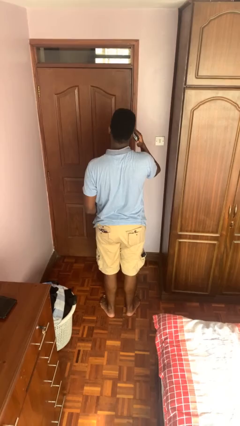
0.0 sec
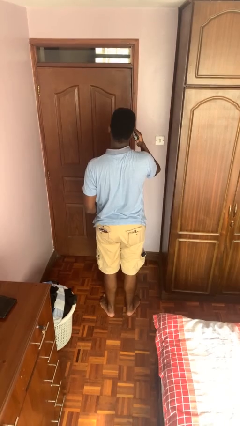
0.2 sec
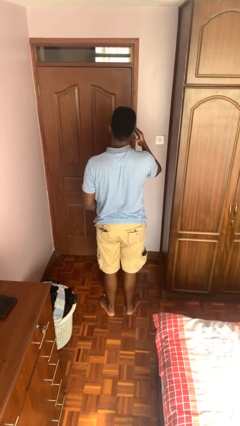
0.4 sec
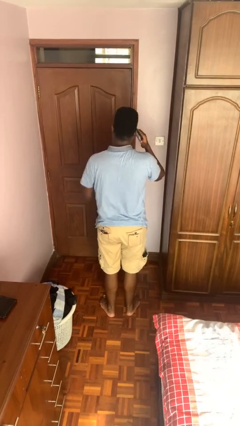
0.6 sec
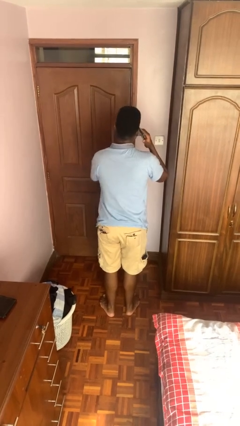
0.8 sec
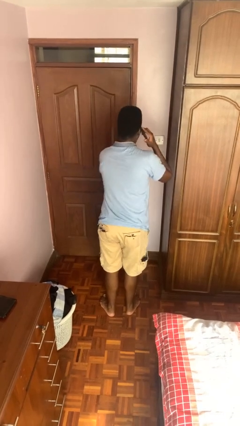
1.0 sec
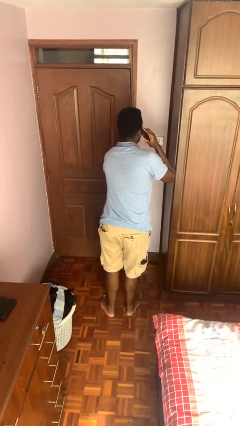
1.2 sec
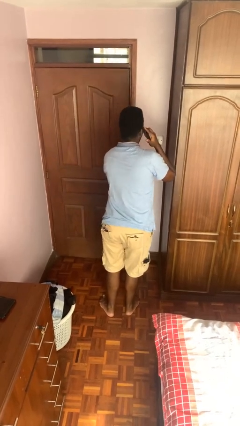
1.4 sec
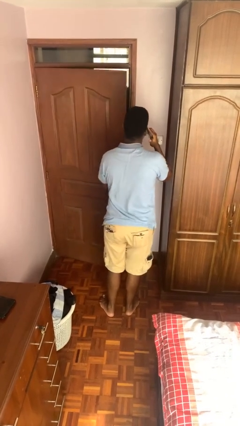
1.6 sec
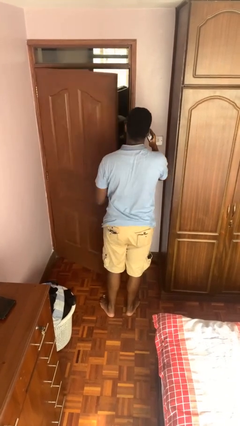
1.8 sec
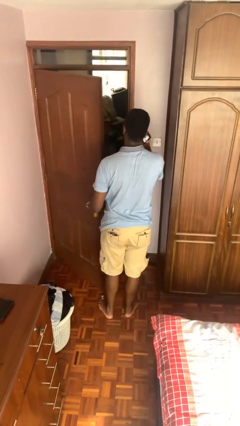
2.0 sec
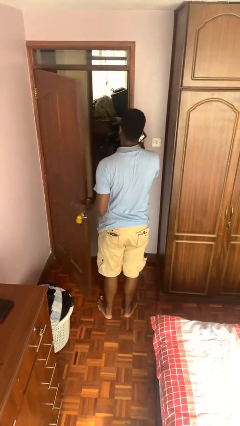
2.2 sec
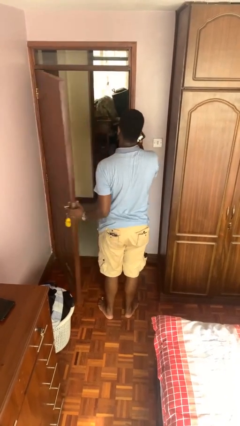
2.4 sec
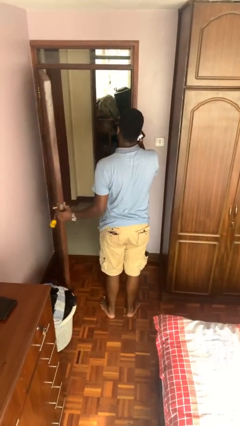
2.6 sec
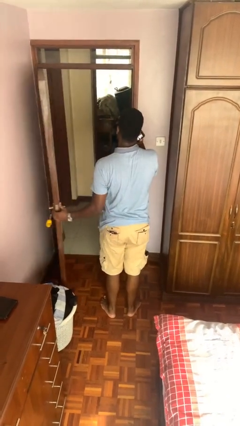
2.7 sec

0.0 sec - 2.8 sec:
person opens facility door

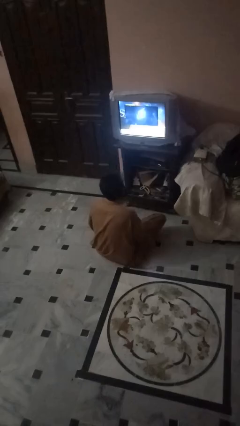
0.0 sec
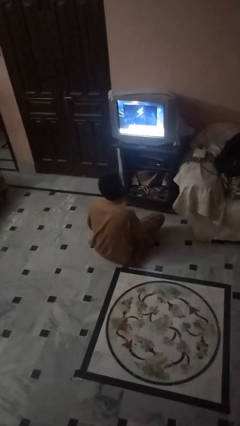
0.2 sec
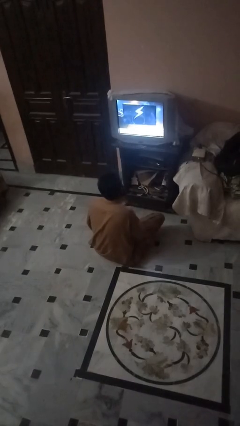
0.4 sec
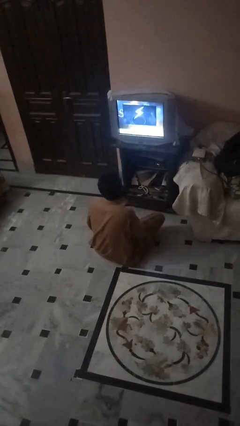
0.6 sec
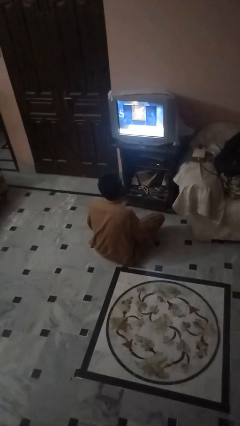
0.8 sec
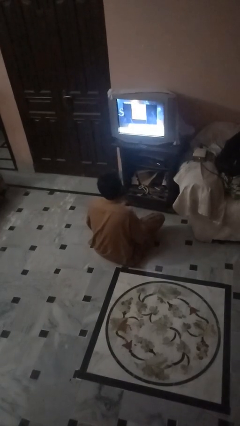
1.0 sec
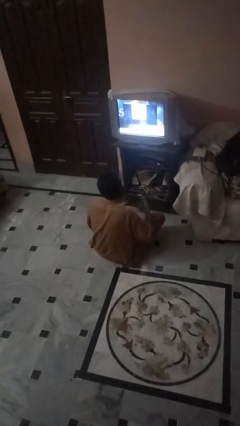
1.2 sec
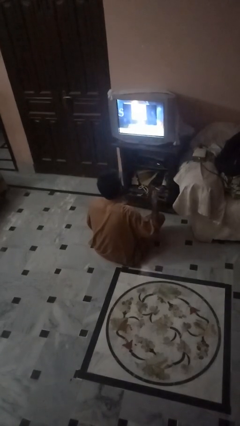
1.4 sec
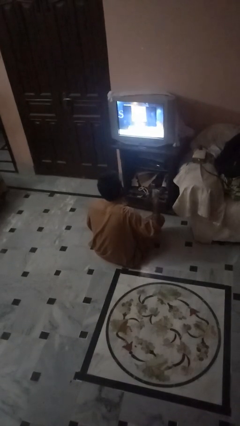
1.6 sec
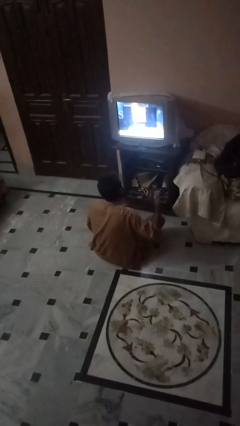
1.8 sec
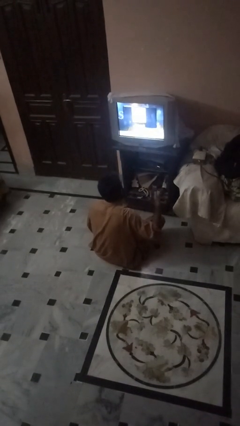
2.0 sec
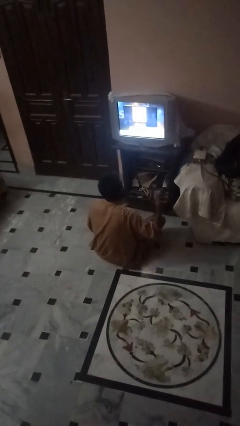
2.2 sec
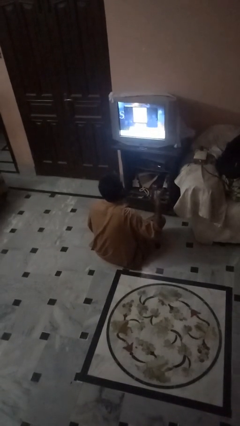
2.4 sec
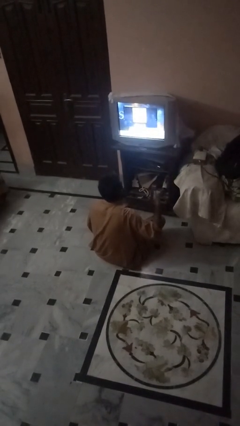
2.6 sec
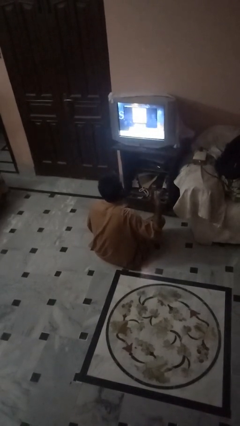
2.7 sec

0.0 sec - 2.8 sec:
person uses television remote

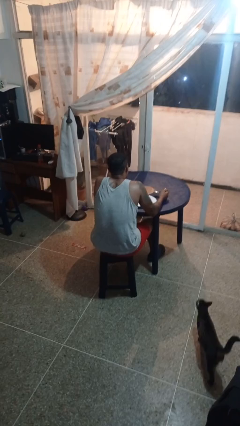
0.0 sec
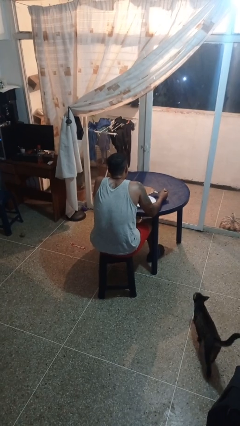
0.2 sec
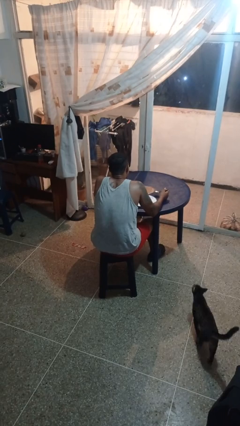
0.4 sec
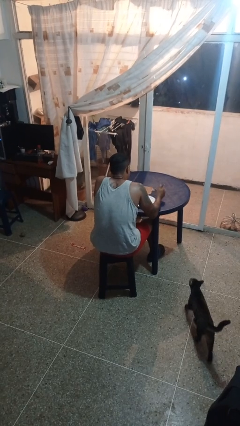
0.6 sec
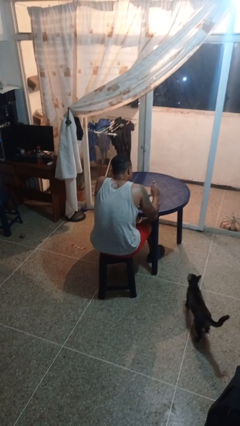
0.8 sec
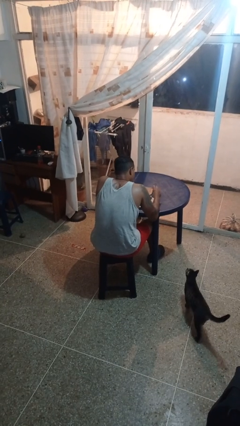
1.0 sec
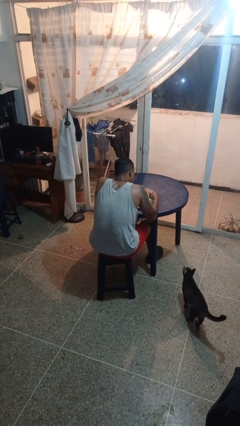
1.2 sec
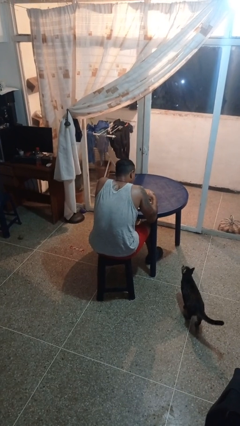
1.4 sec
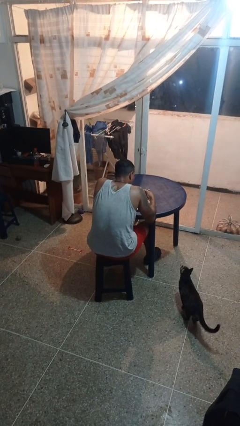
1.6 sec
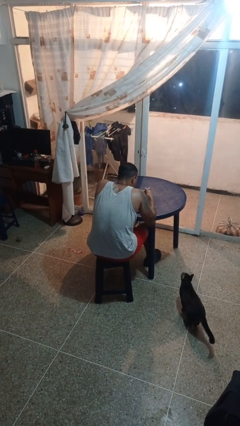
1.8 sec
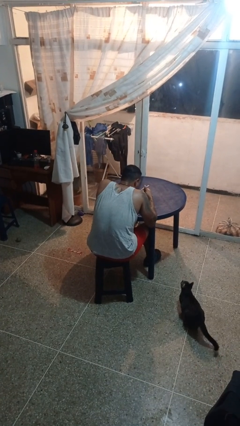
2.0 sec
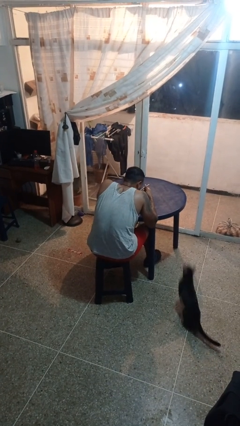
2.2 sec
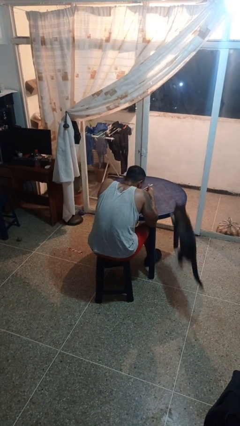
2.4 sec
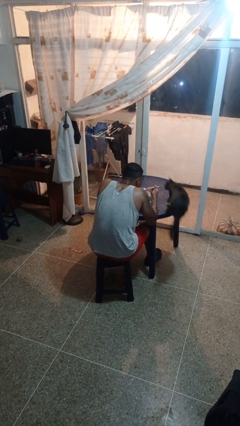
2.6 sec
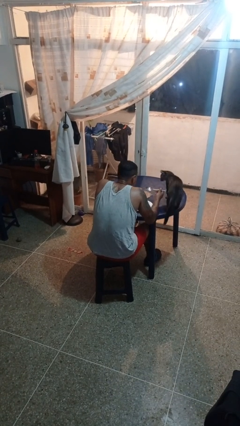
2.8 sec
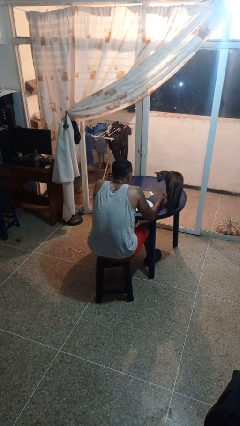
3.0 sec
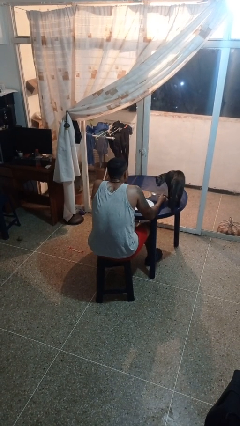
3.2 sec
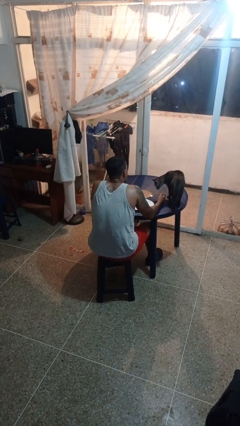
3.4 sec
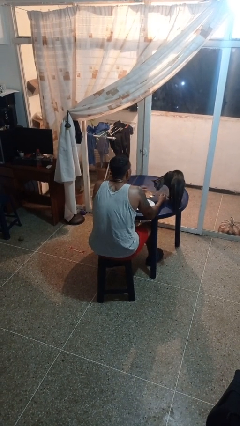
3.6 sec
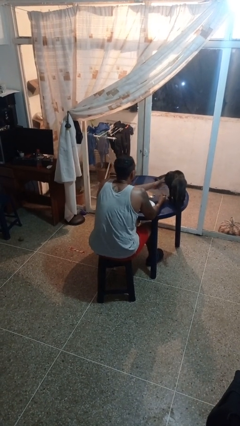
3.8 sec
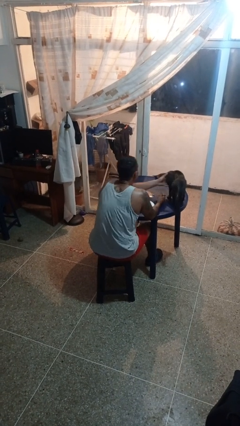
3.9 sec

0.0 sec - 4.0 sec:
person eats with utensil

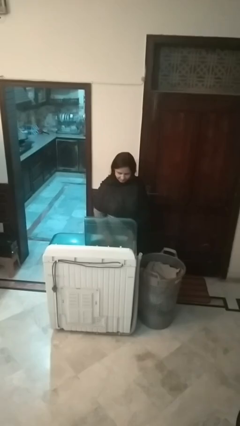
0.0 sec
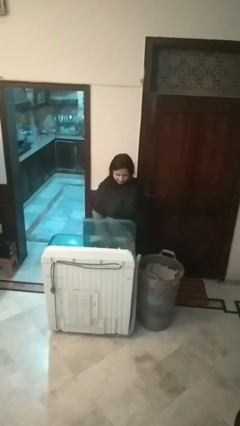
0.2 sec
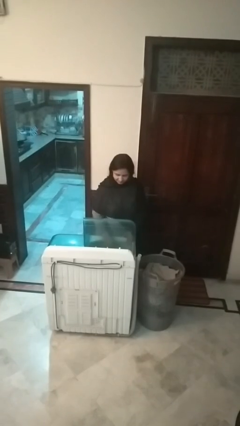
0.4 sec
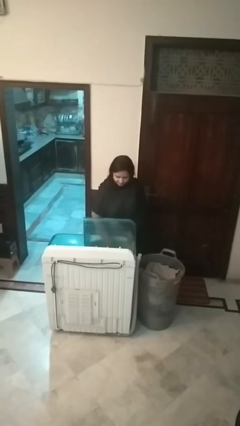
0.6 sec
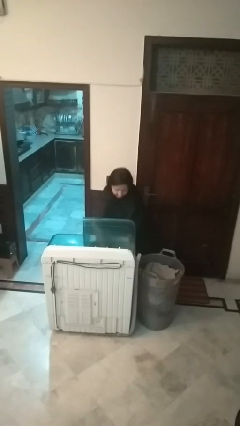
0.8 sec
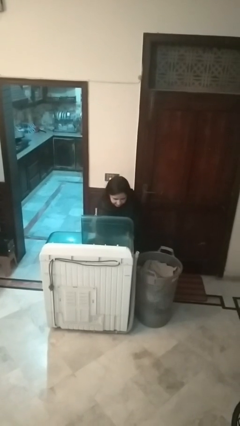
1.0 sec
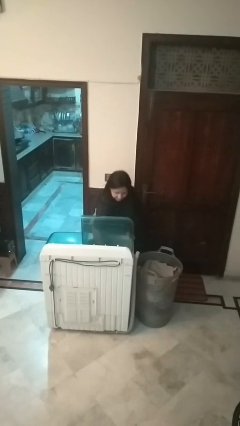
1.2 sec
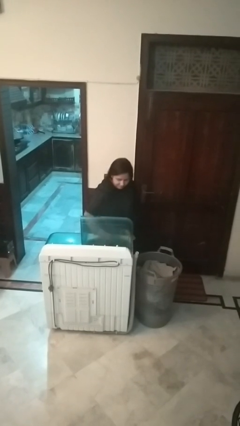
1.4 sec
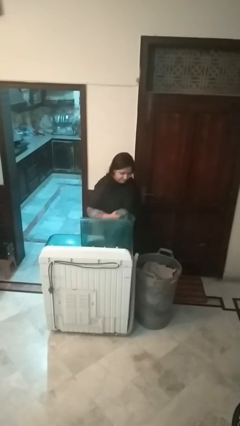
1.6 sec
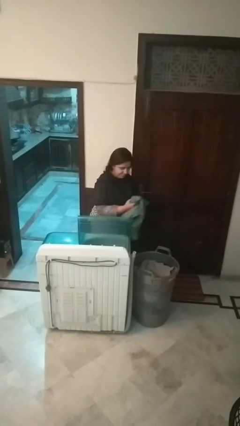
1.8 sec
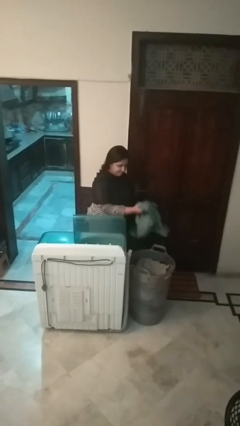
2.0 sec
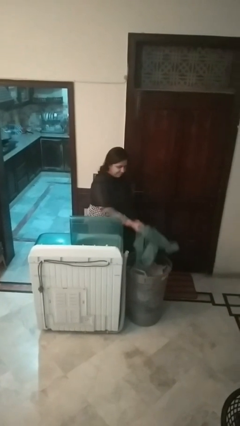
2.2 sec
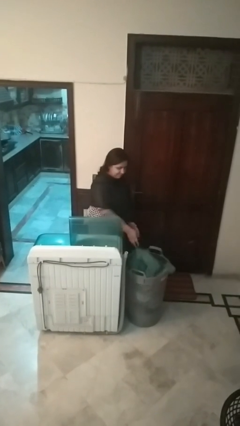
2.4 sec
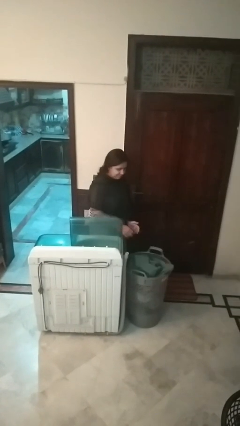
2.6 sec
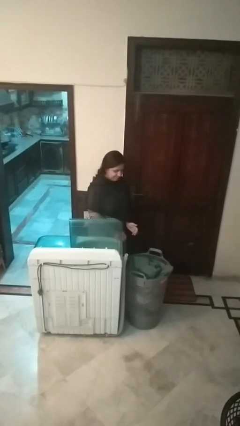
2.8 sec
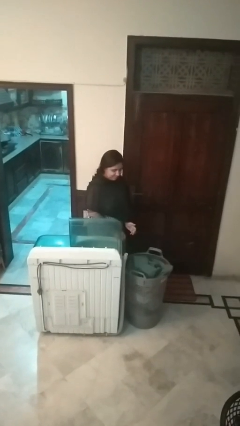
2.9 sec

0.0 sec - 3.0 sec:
person unloads clotheswasher

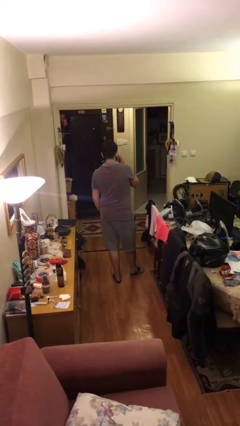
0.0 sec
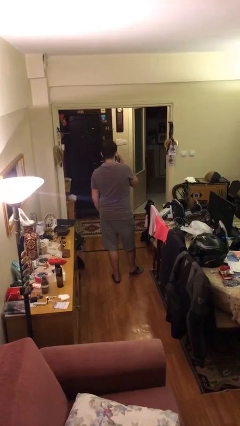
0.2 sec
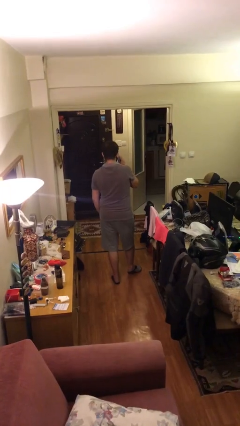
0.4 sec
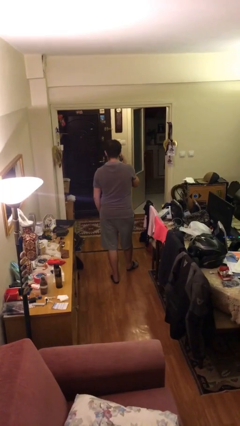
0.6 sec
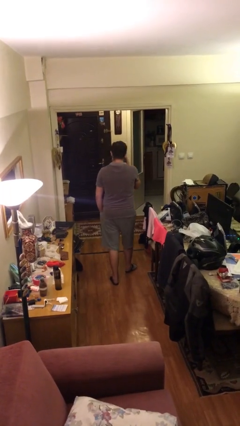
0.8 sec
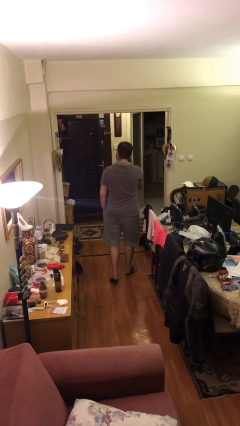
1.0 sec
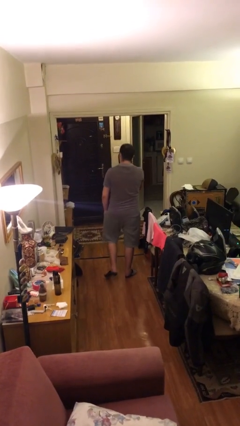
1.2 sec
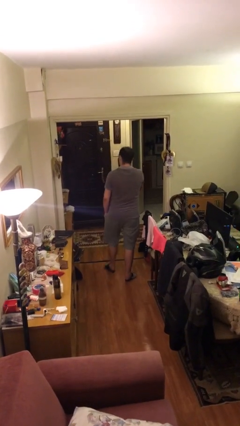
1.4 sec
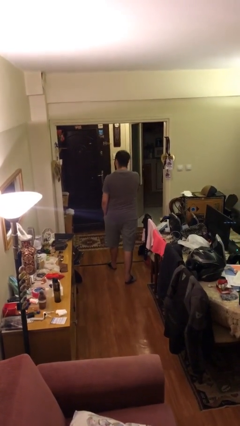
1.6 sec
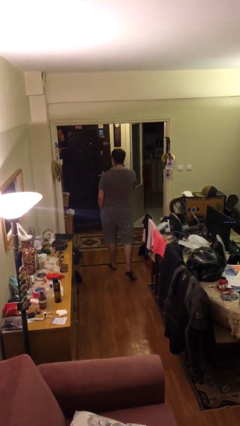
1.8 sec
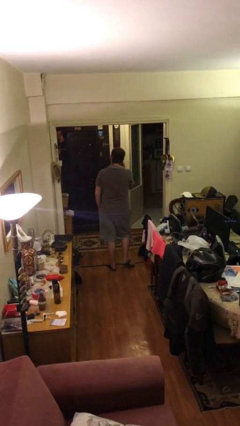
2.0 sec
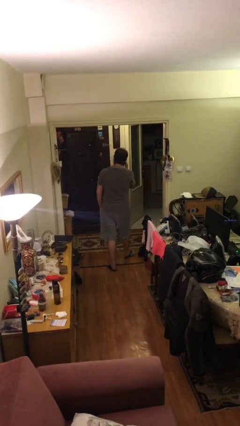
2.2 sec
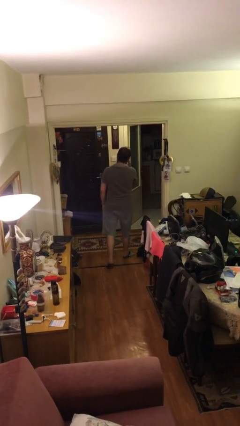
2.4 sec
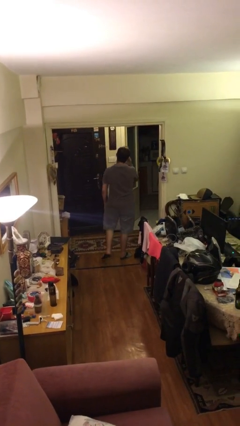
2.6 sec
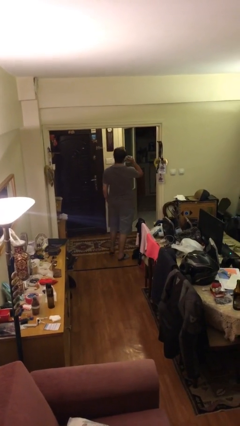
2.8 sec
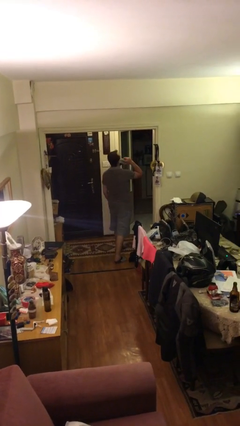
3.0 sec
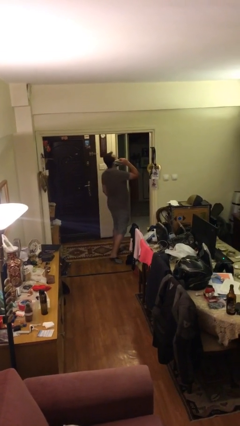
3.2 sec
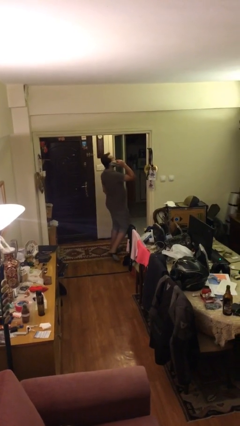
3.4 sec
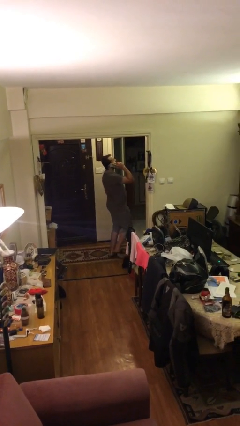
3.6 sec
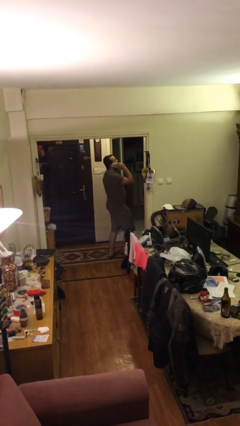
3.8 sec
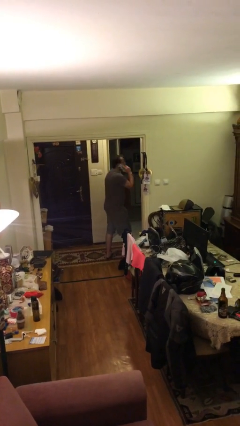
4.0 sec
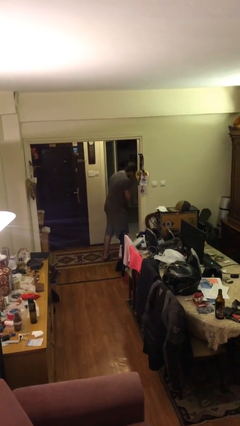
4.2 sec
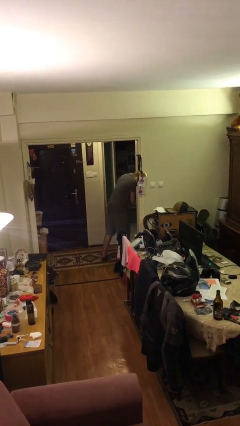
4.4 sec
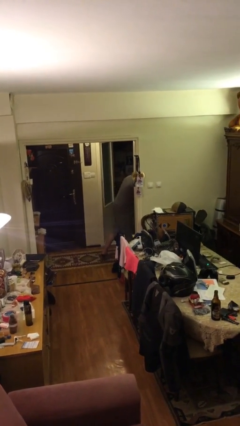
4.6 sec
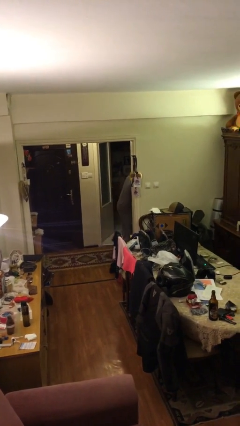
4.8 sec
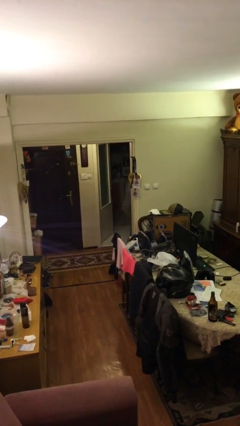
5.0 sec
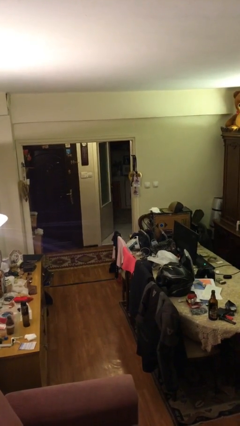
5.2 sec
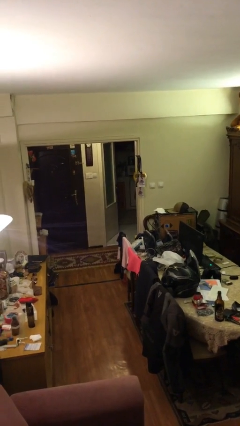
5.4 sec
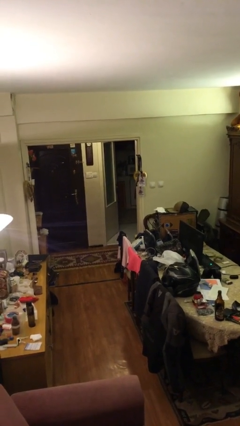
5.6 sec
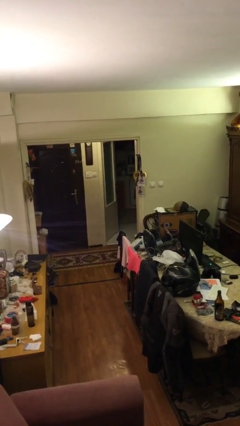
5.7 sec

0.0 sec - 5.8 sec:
person exits scene through structure
